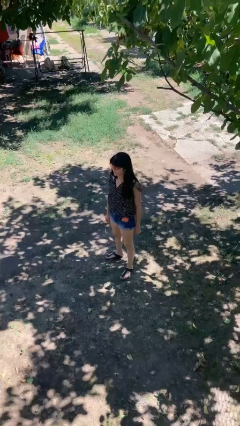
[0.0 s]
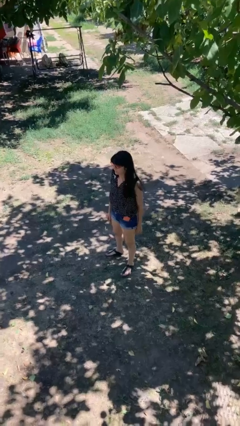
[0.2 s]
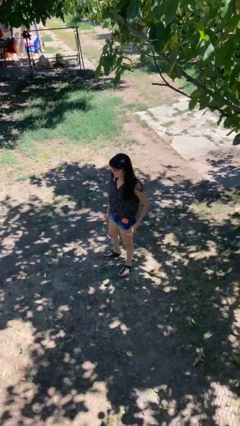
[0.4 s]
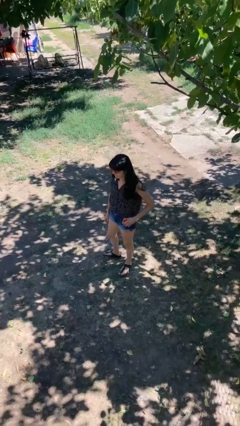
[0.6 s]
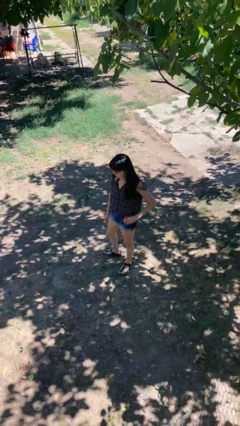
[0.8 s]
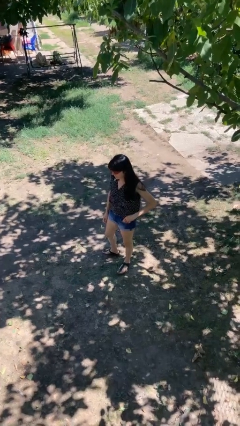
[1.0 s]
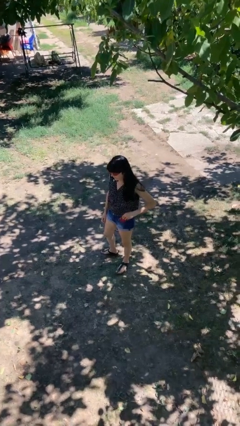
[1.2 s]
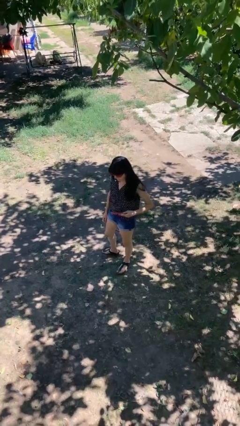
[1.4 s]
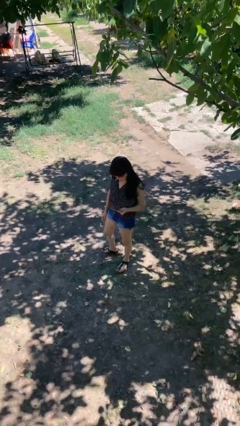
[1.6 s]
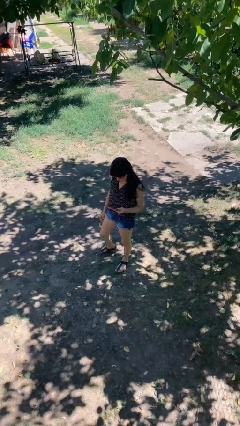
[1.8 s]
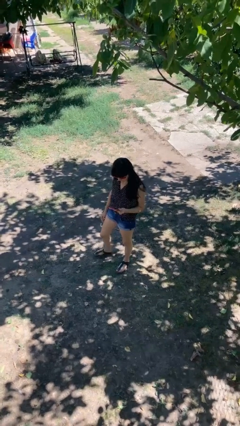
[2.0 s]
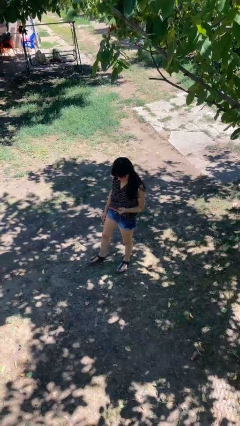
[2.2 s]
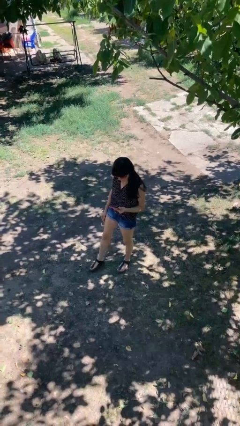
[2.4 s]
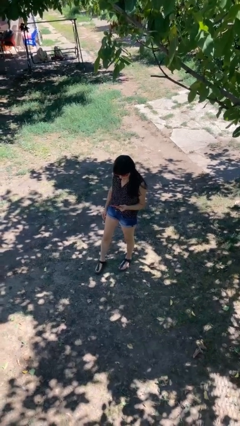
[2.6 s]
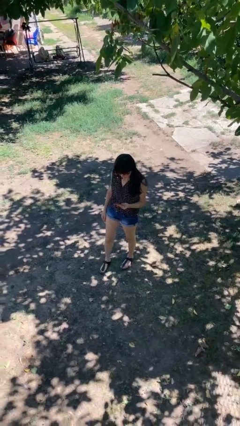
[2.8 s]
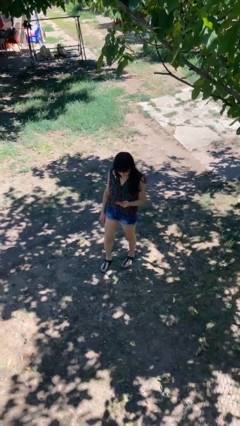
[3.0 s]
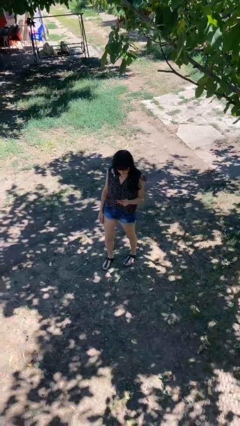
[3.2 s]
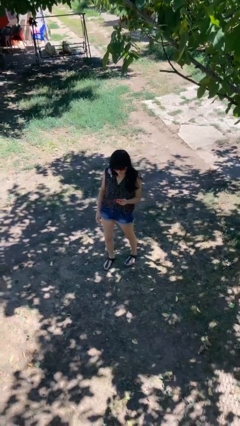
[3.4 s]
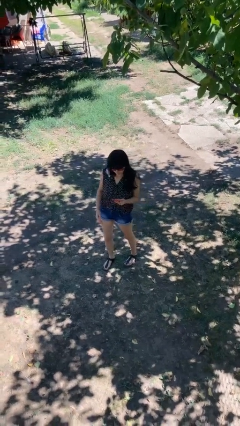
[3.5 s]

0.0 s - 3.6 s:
person takes phone from pocket

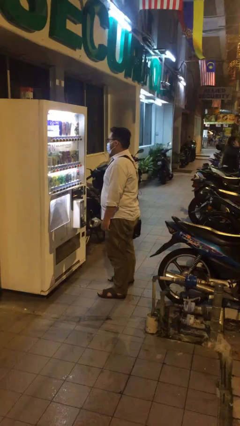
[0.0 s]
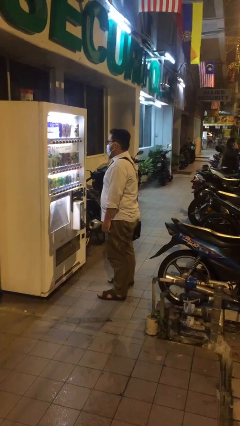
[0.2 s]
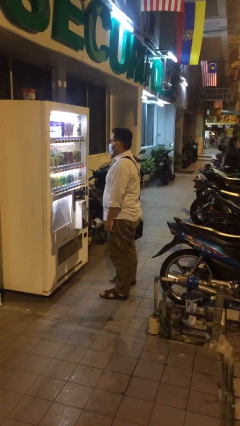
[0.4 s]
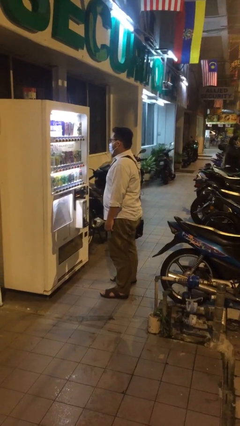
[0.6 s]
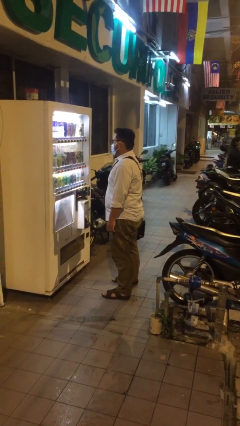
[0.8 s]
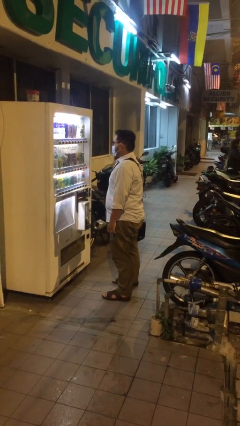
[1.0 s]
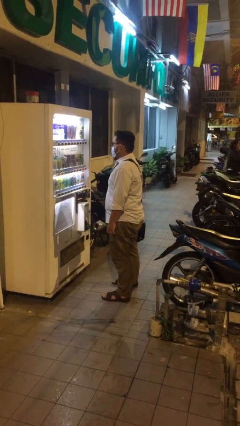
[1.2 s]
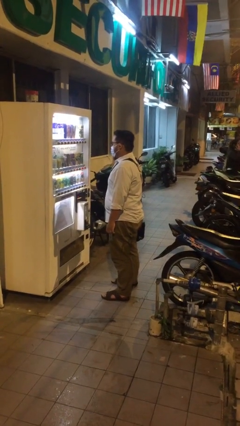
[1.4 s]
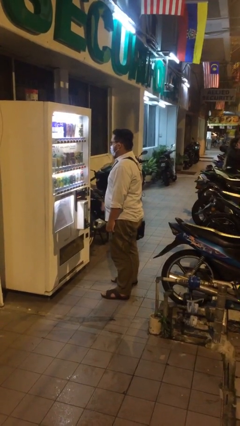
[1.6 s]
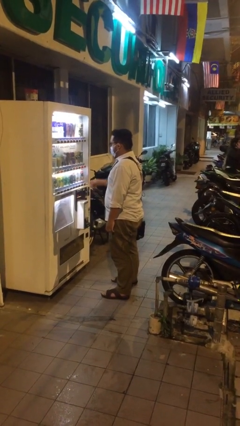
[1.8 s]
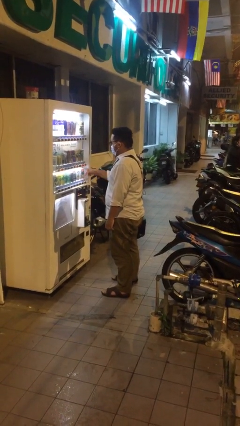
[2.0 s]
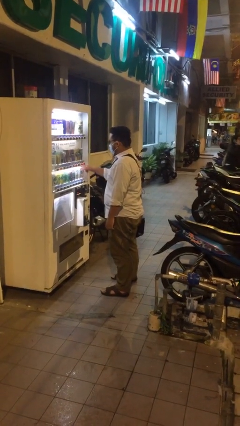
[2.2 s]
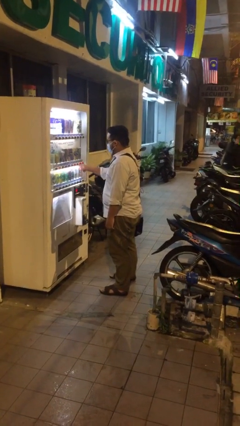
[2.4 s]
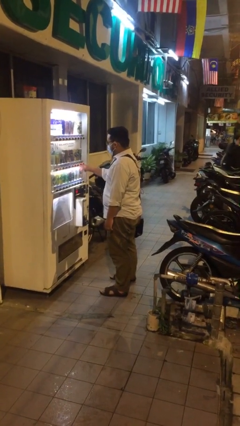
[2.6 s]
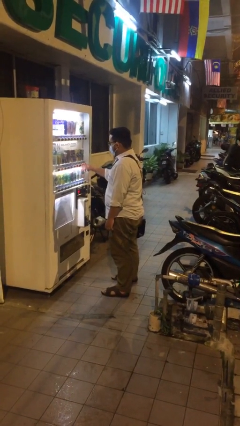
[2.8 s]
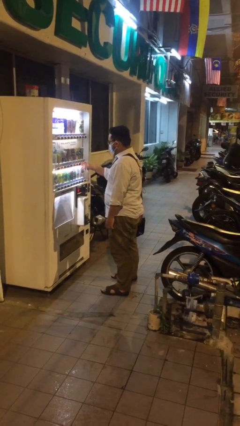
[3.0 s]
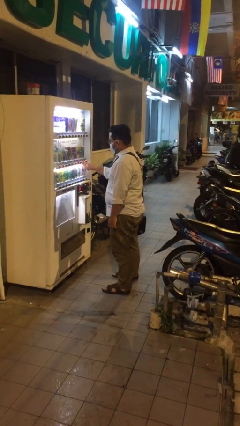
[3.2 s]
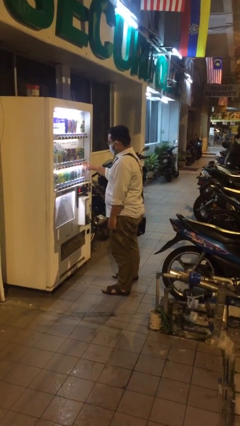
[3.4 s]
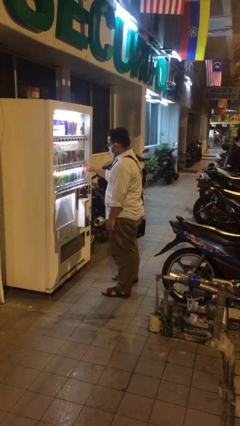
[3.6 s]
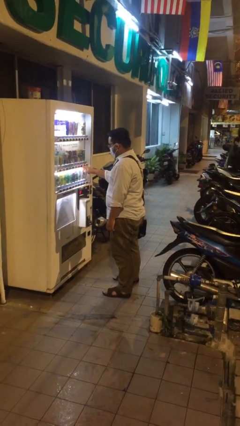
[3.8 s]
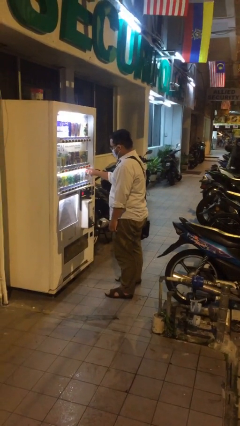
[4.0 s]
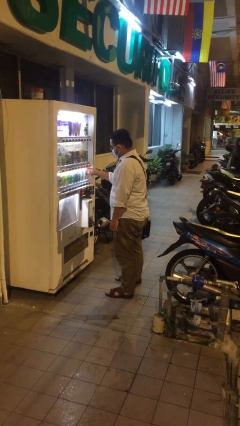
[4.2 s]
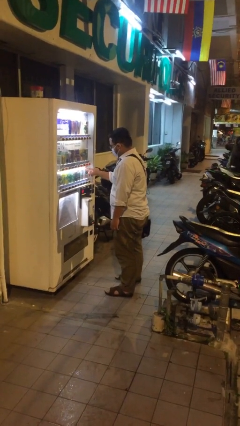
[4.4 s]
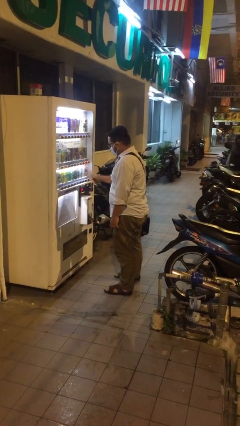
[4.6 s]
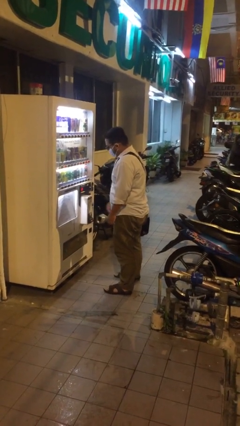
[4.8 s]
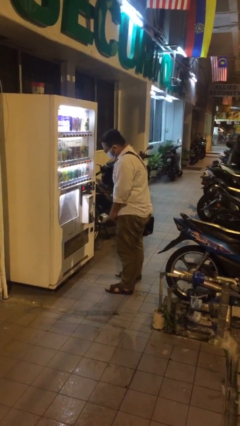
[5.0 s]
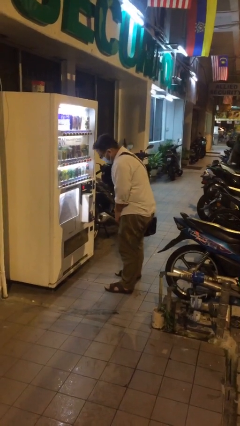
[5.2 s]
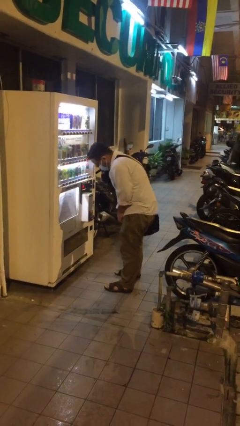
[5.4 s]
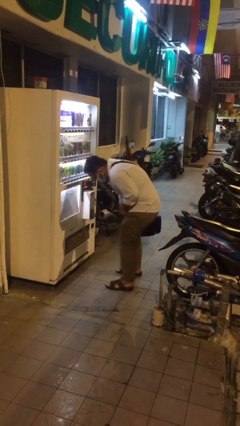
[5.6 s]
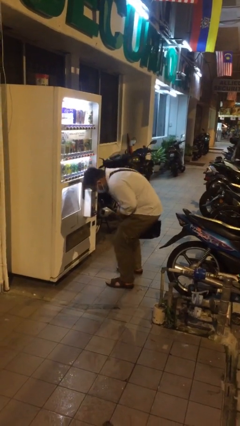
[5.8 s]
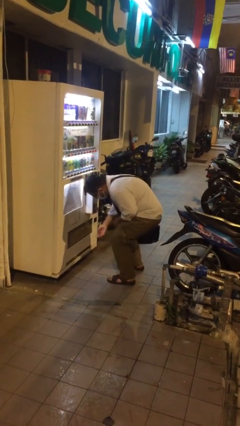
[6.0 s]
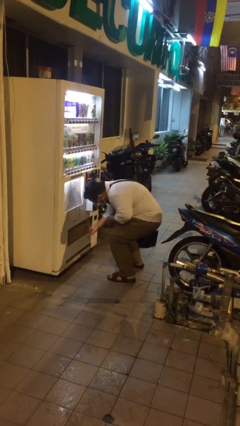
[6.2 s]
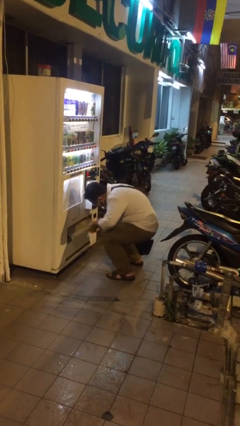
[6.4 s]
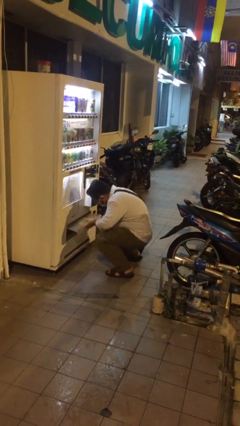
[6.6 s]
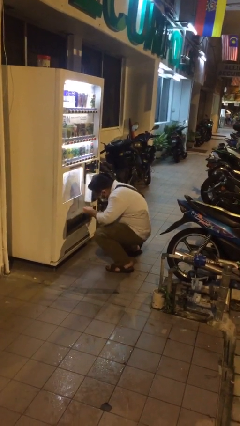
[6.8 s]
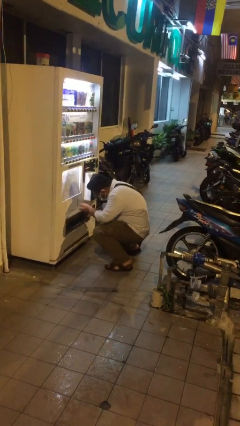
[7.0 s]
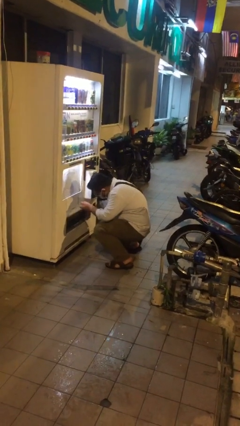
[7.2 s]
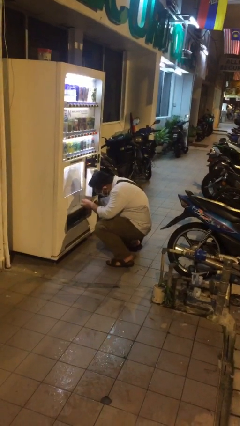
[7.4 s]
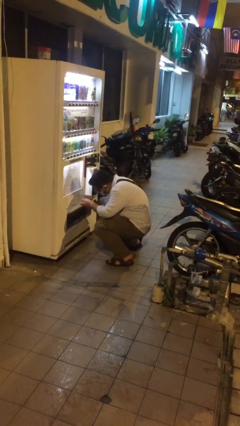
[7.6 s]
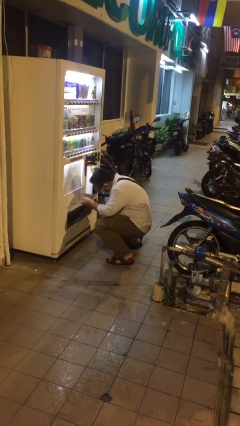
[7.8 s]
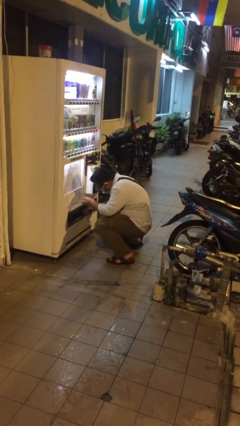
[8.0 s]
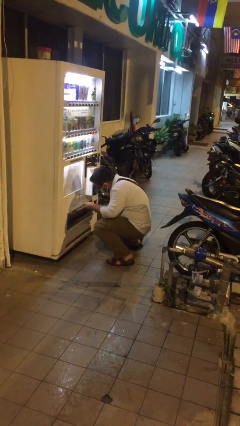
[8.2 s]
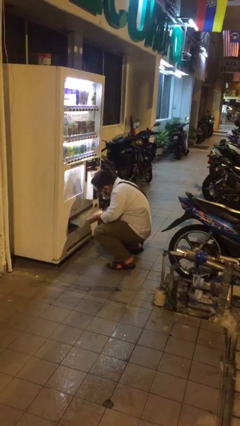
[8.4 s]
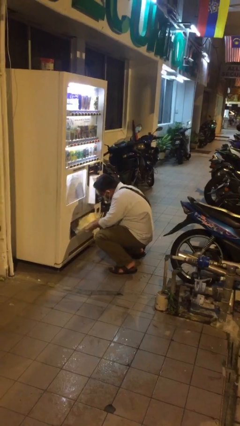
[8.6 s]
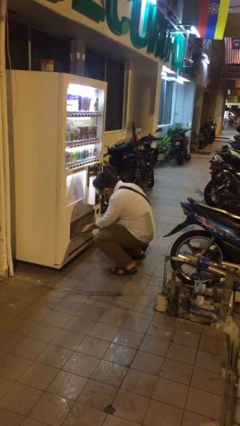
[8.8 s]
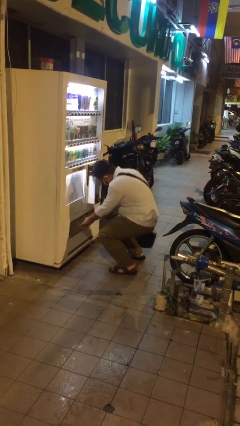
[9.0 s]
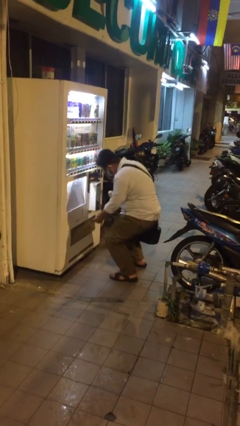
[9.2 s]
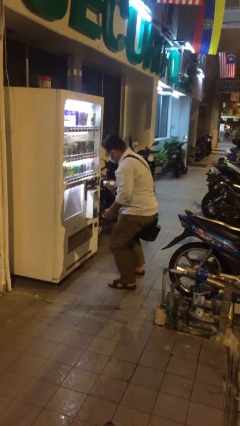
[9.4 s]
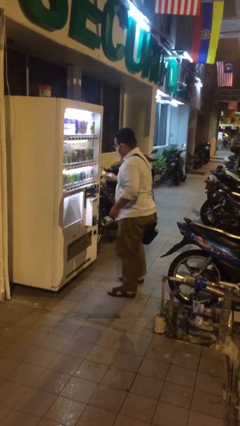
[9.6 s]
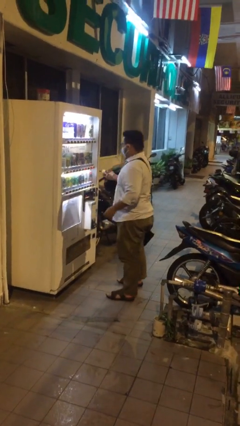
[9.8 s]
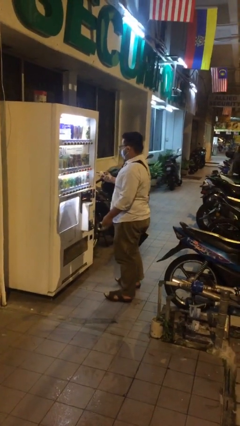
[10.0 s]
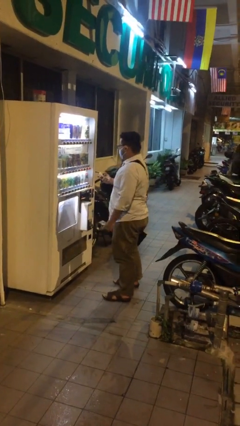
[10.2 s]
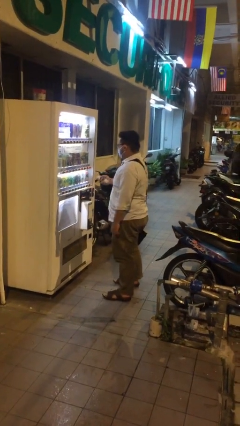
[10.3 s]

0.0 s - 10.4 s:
person purchases from machine

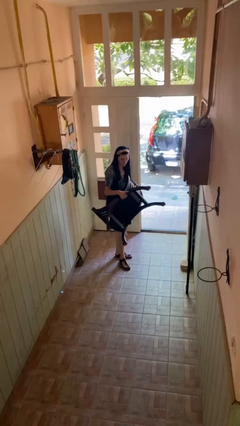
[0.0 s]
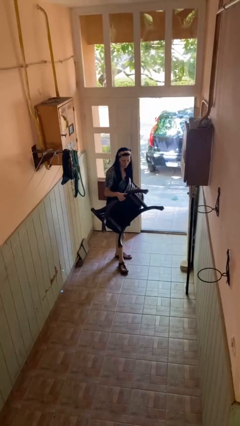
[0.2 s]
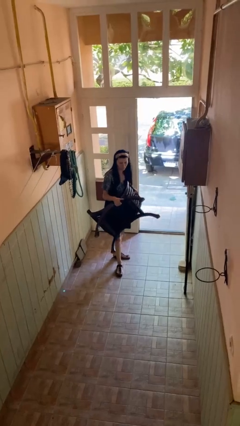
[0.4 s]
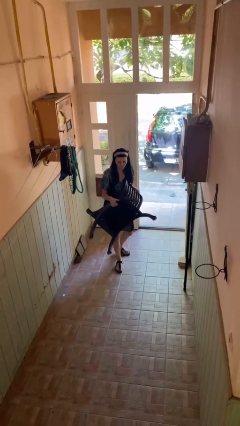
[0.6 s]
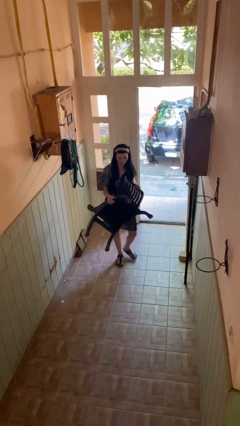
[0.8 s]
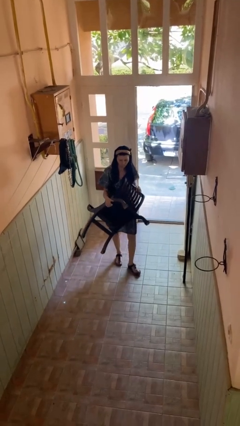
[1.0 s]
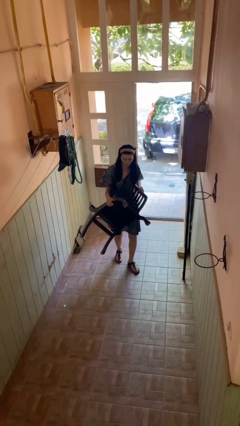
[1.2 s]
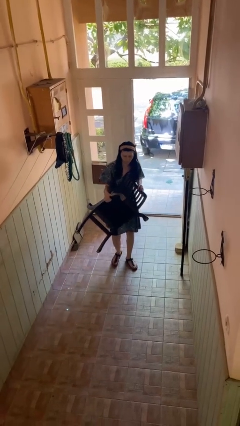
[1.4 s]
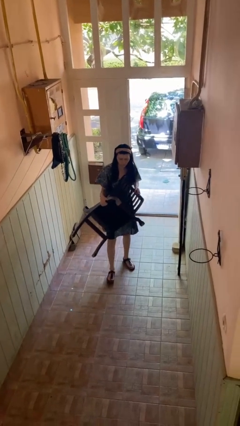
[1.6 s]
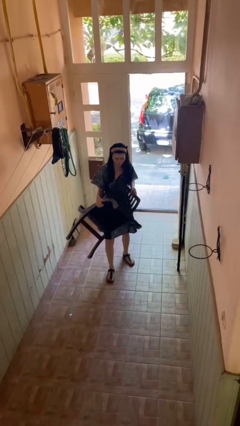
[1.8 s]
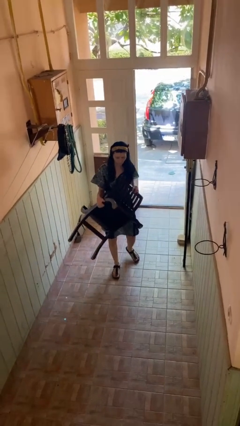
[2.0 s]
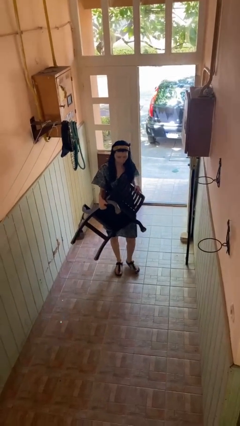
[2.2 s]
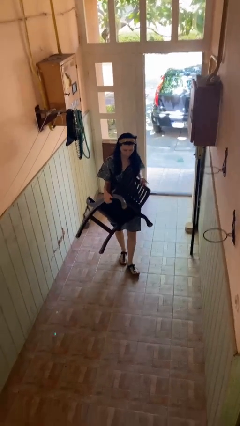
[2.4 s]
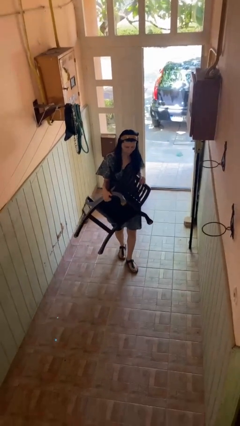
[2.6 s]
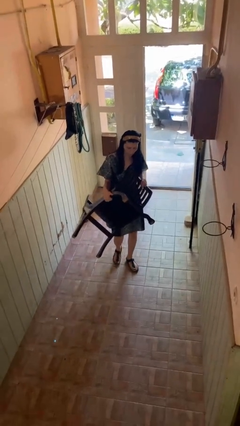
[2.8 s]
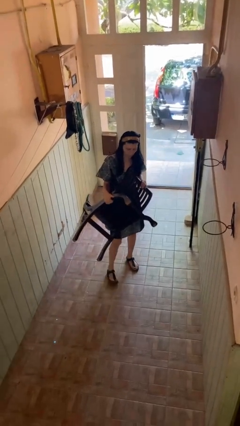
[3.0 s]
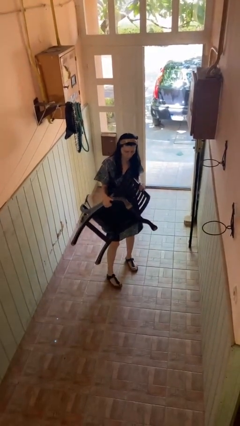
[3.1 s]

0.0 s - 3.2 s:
person carries furniture

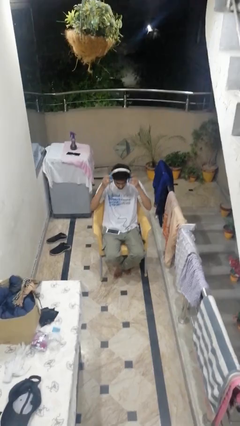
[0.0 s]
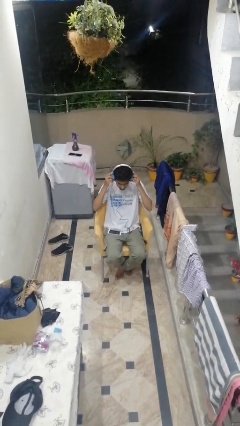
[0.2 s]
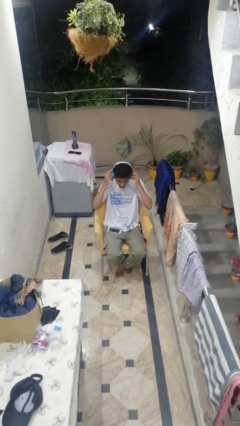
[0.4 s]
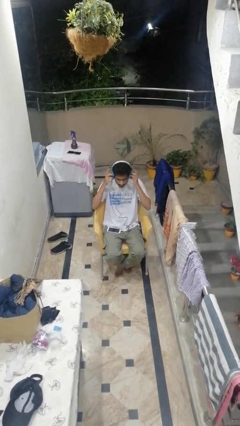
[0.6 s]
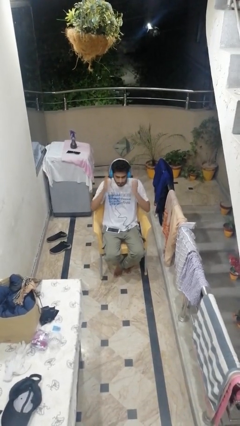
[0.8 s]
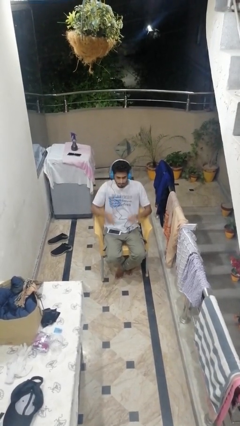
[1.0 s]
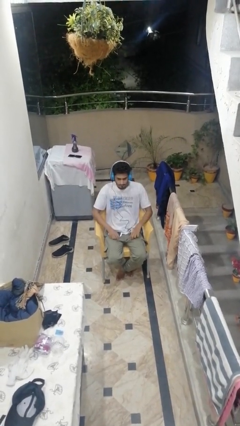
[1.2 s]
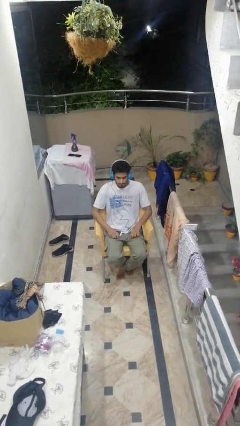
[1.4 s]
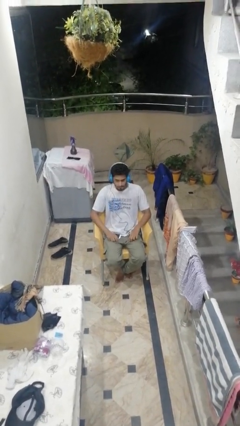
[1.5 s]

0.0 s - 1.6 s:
person puts on headphones
